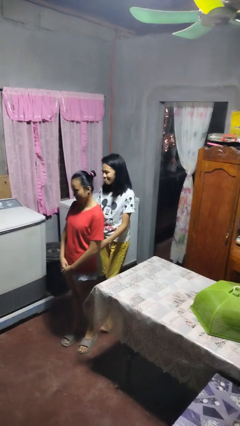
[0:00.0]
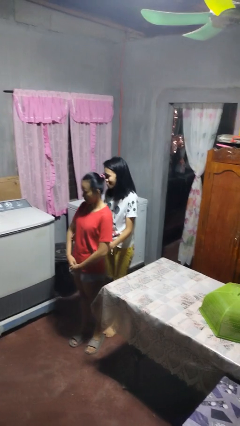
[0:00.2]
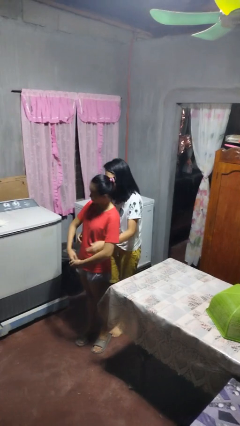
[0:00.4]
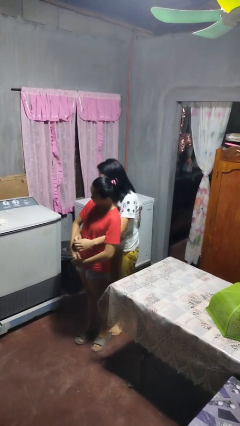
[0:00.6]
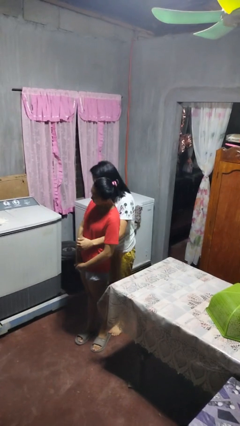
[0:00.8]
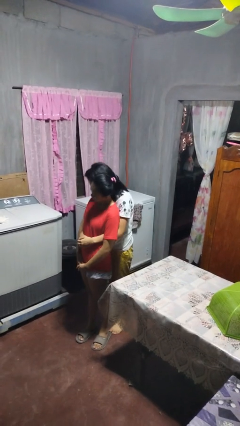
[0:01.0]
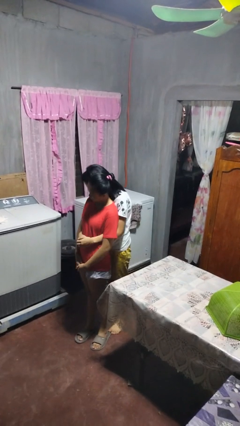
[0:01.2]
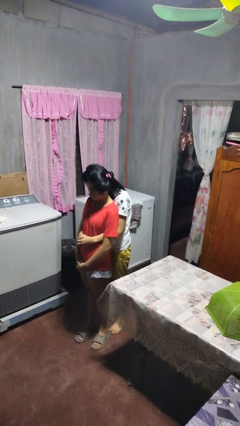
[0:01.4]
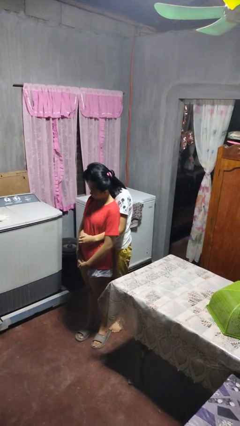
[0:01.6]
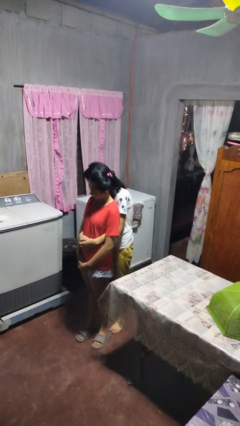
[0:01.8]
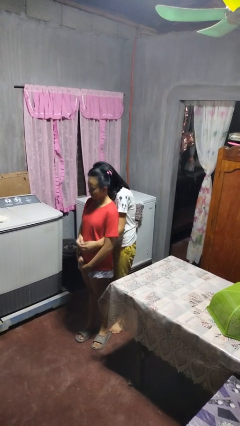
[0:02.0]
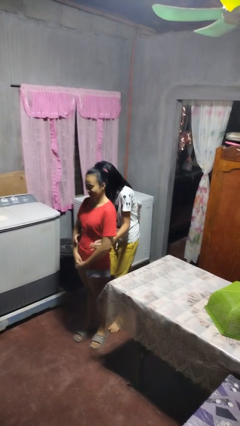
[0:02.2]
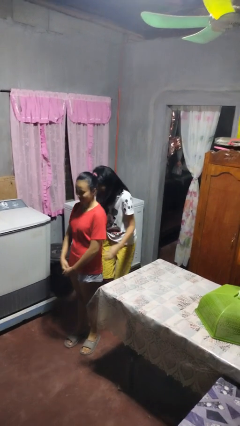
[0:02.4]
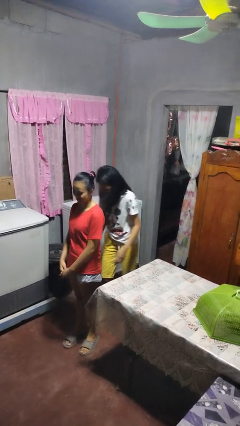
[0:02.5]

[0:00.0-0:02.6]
person hugs person from behind

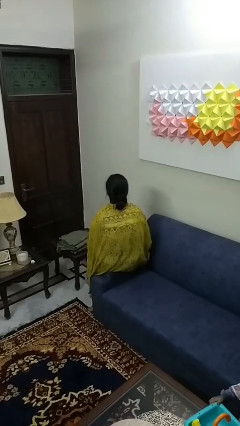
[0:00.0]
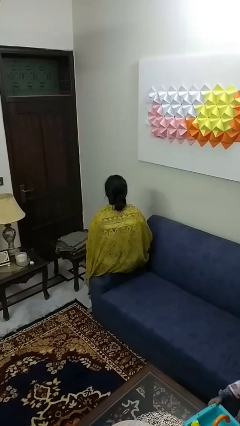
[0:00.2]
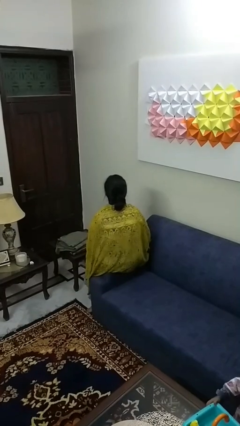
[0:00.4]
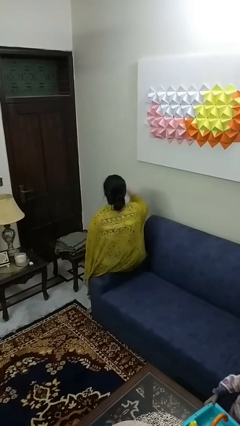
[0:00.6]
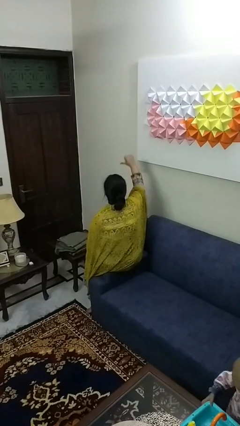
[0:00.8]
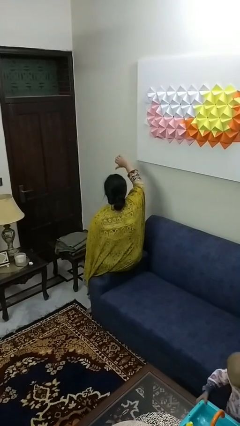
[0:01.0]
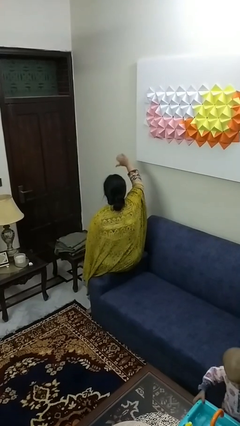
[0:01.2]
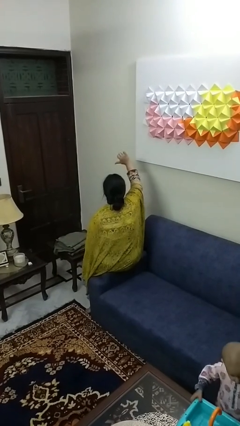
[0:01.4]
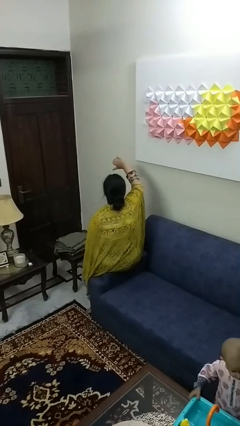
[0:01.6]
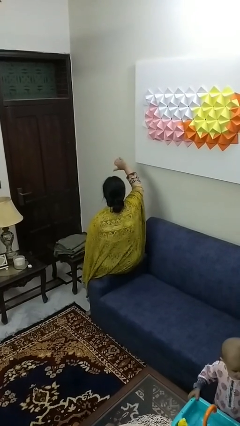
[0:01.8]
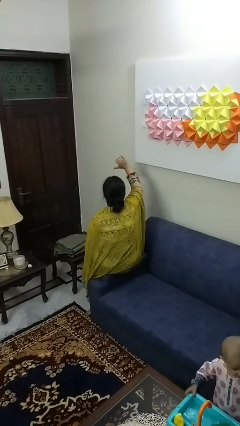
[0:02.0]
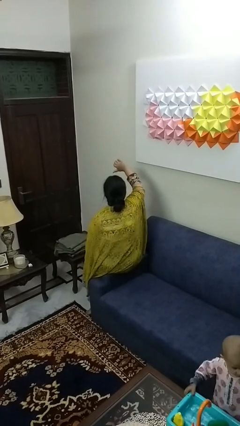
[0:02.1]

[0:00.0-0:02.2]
person gestures thumbs down

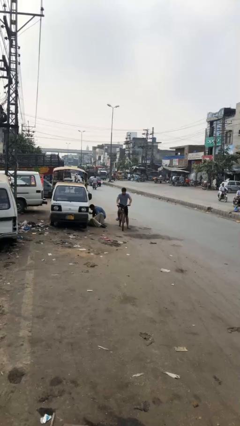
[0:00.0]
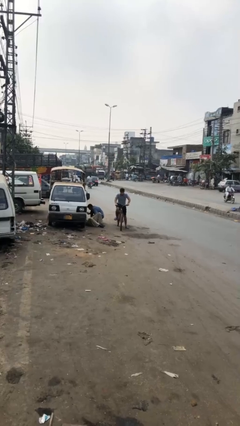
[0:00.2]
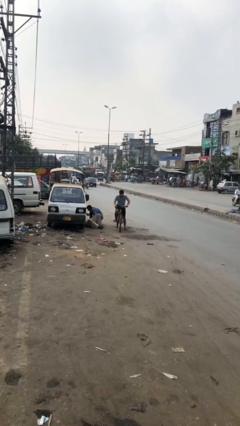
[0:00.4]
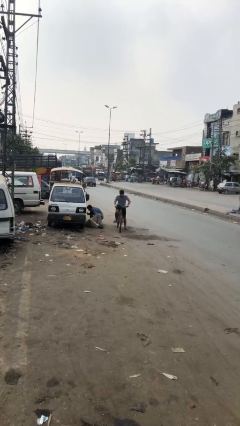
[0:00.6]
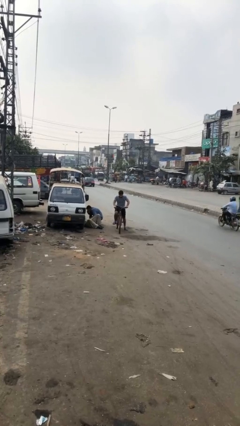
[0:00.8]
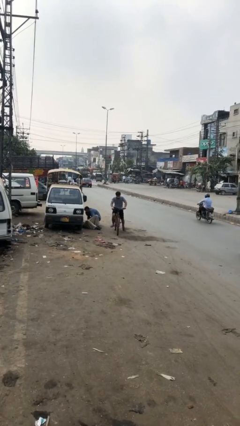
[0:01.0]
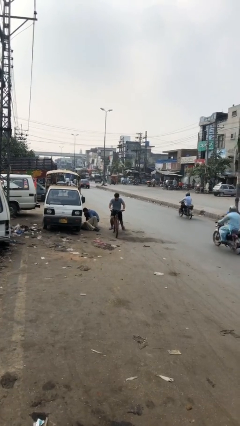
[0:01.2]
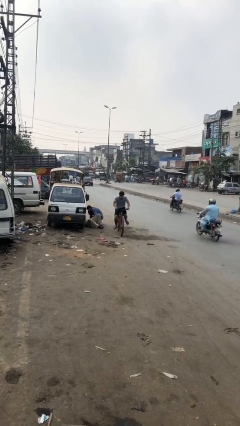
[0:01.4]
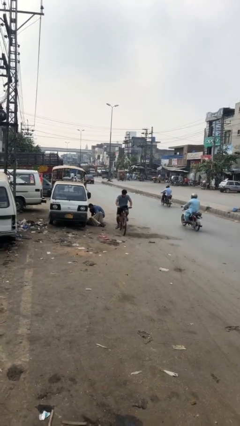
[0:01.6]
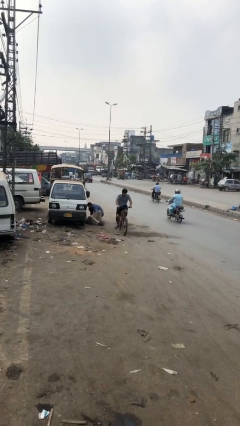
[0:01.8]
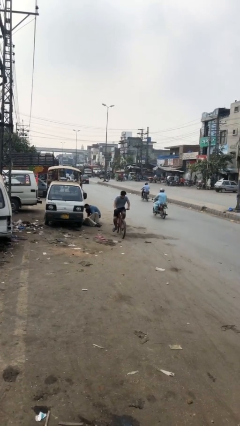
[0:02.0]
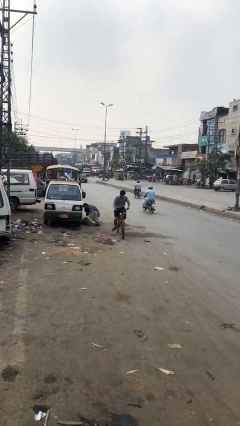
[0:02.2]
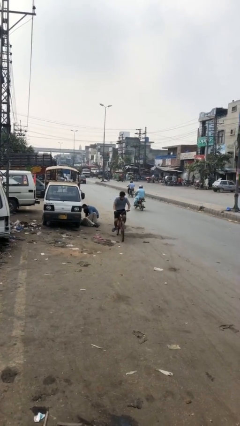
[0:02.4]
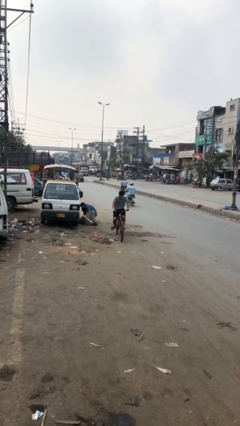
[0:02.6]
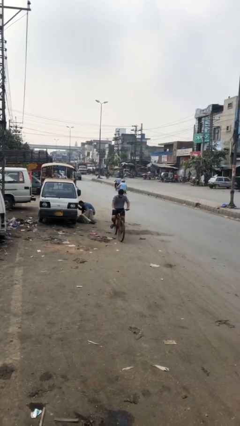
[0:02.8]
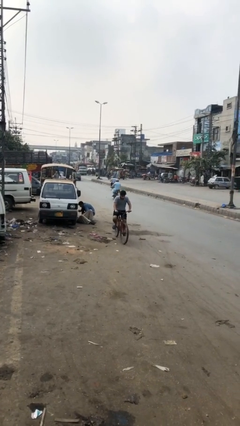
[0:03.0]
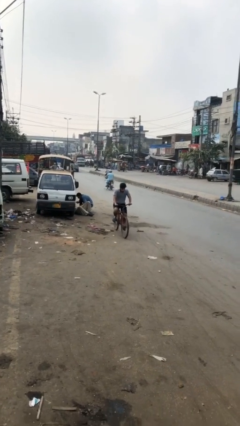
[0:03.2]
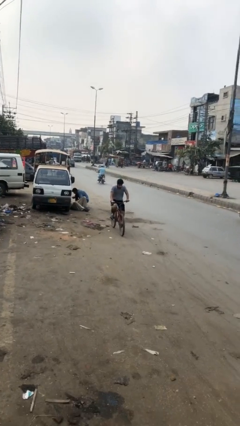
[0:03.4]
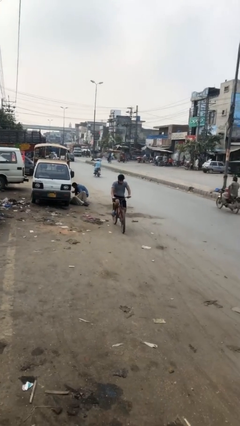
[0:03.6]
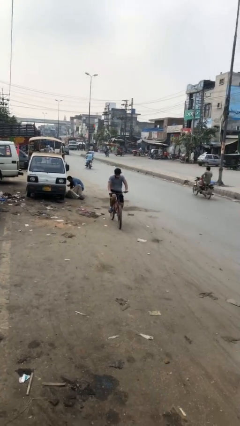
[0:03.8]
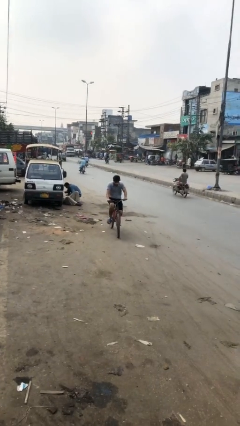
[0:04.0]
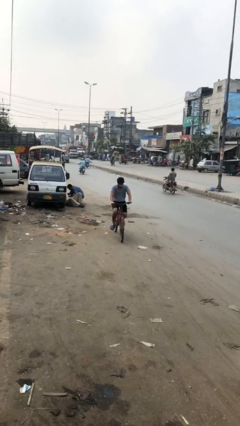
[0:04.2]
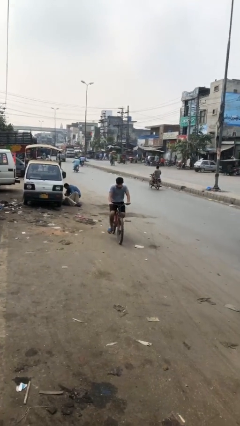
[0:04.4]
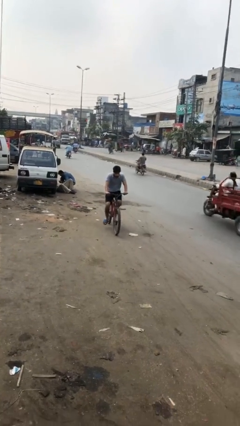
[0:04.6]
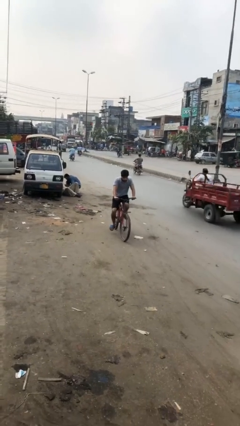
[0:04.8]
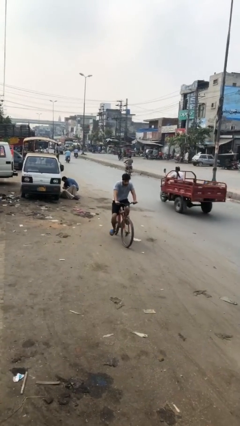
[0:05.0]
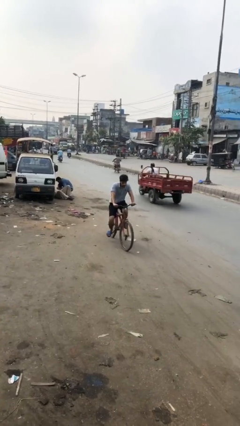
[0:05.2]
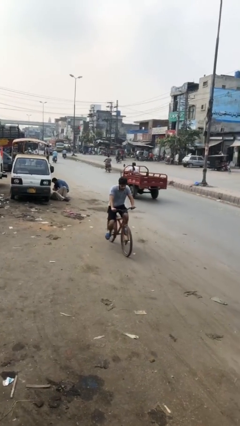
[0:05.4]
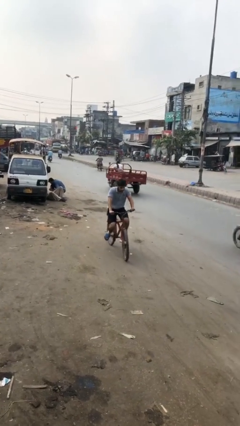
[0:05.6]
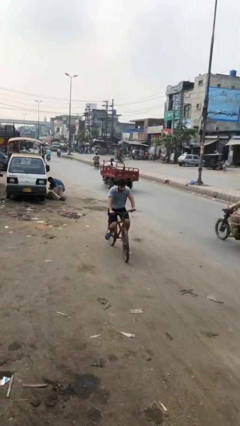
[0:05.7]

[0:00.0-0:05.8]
person rides bicycle

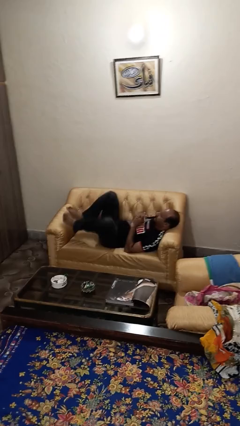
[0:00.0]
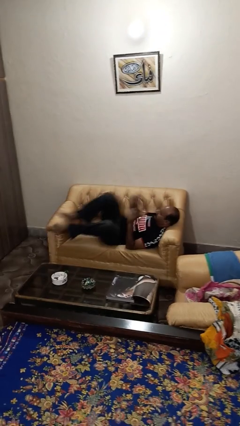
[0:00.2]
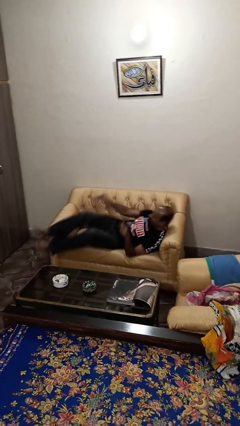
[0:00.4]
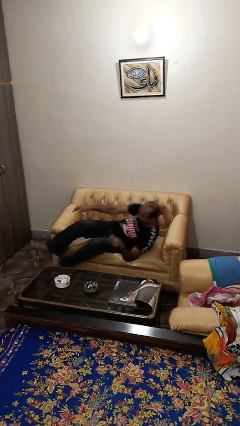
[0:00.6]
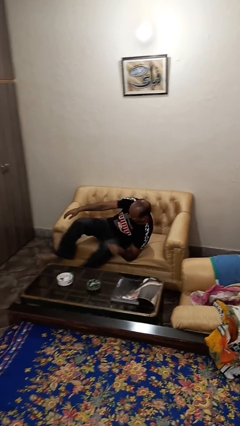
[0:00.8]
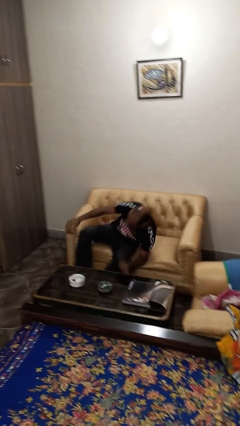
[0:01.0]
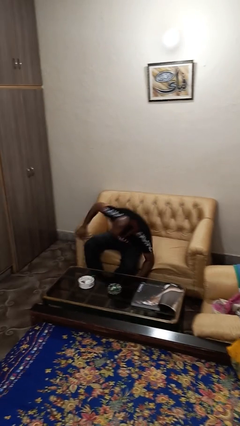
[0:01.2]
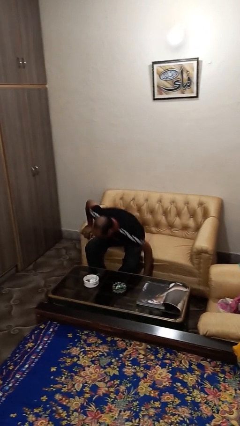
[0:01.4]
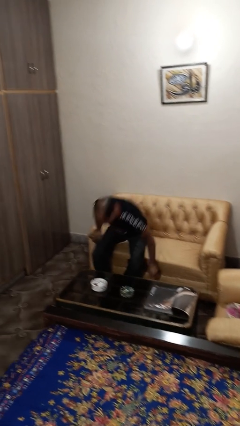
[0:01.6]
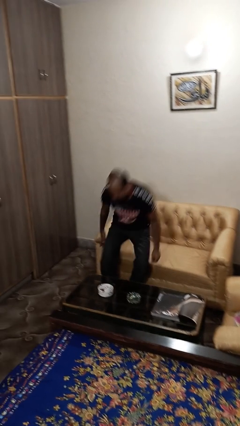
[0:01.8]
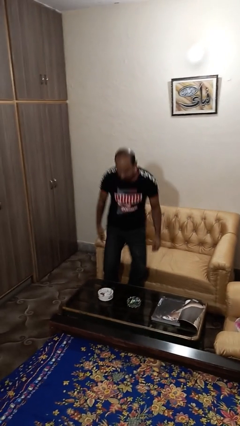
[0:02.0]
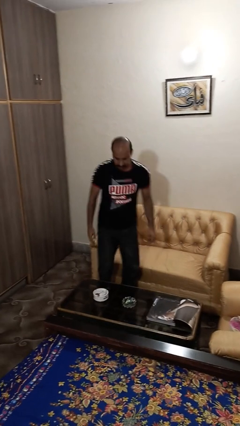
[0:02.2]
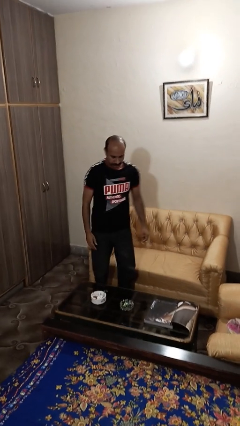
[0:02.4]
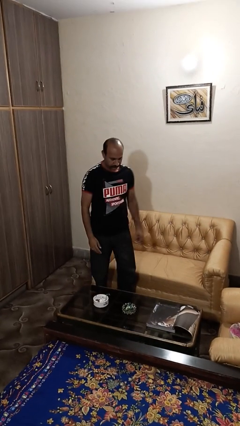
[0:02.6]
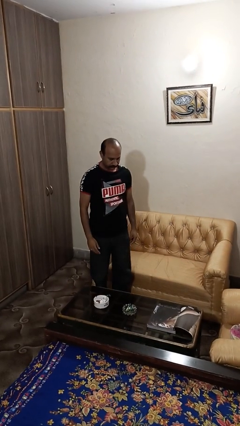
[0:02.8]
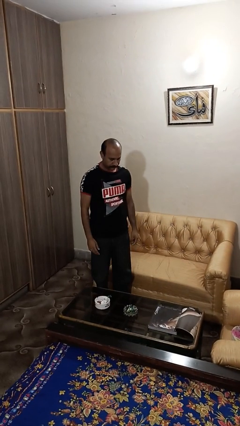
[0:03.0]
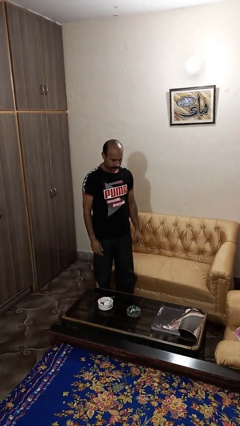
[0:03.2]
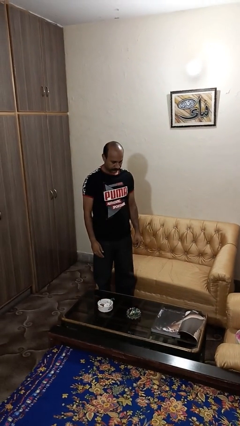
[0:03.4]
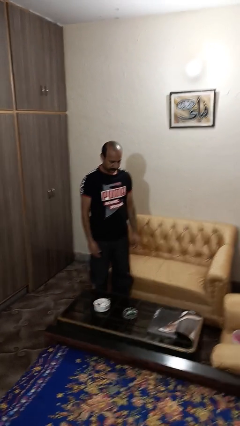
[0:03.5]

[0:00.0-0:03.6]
person stands up

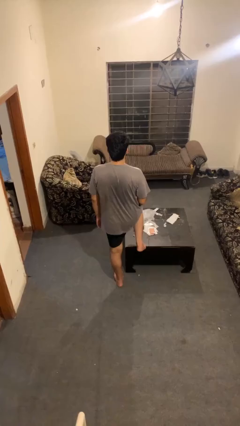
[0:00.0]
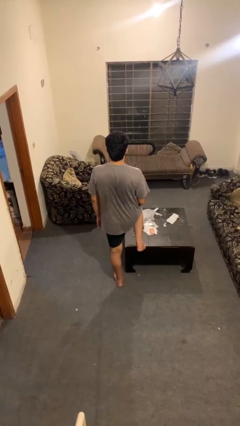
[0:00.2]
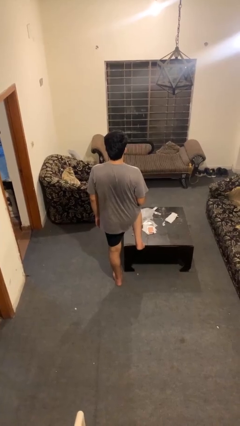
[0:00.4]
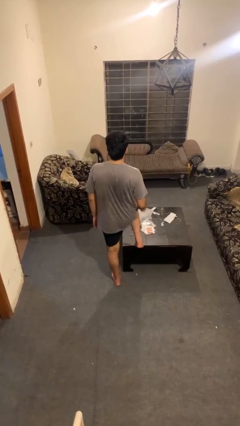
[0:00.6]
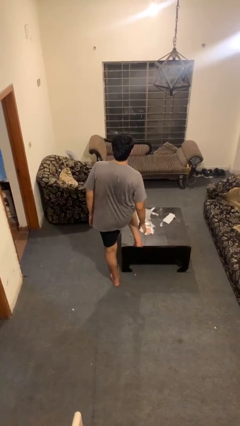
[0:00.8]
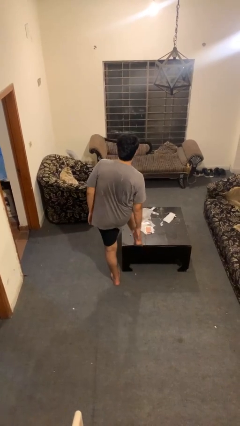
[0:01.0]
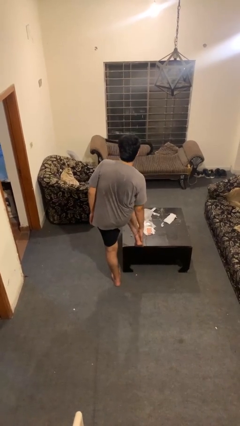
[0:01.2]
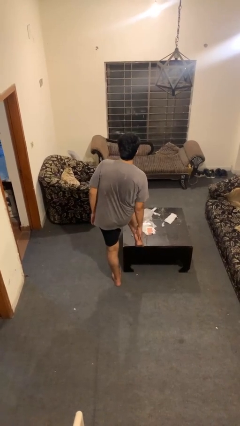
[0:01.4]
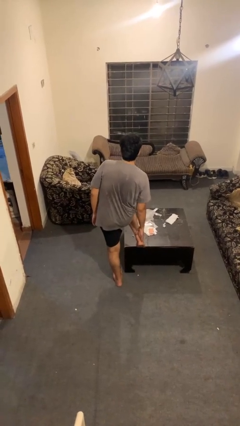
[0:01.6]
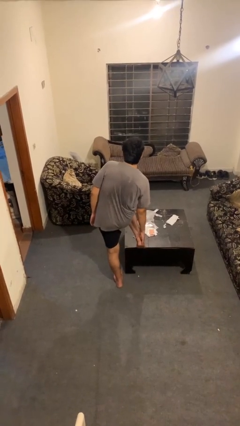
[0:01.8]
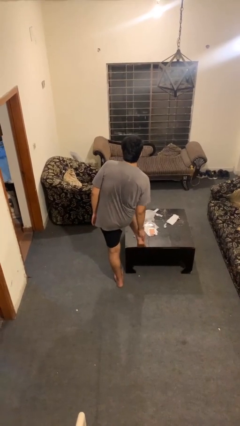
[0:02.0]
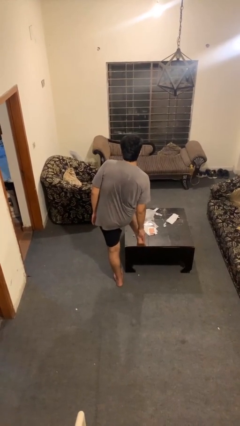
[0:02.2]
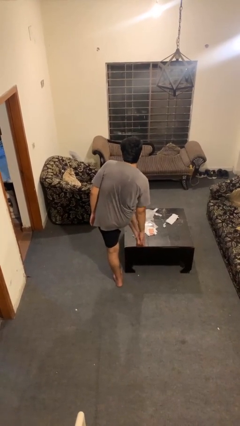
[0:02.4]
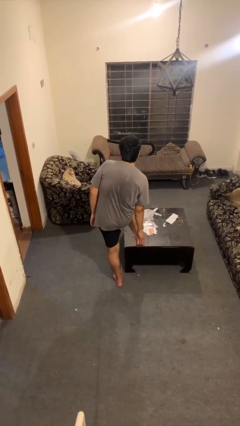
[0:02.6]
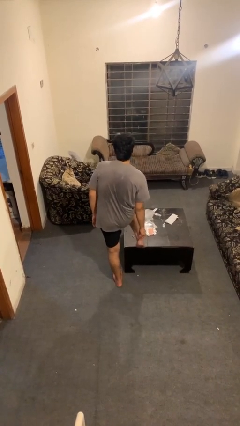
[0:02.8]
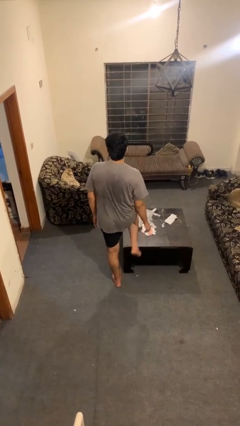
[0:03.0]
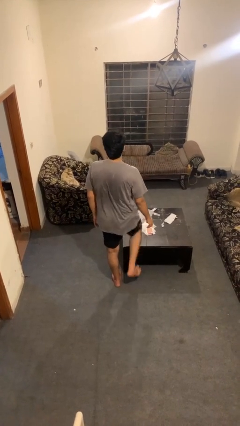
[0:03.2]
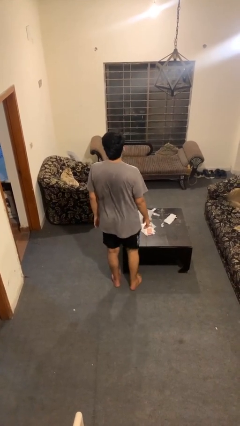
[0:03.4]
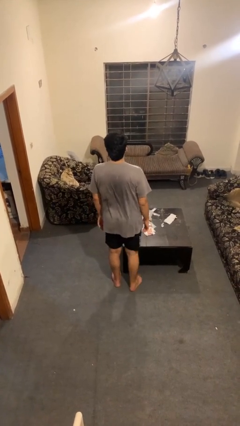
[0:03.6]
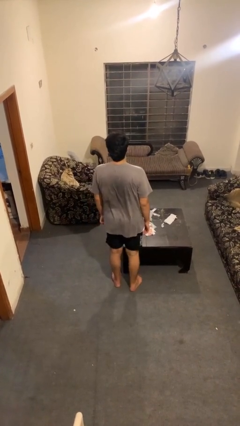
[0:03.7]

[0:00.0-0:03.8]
person rubs foot
